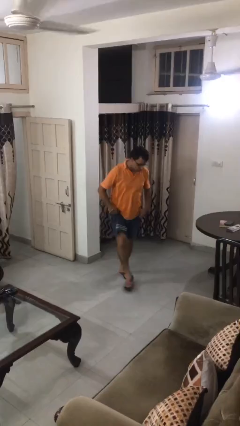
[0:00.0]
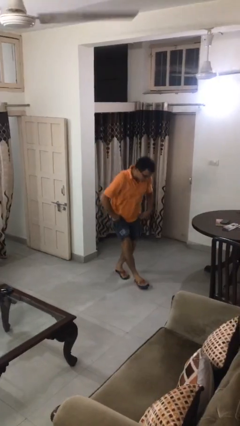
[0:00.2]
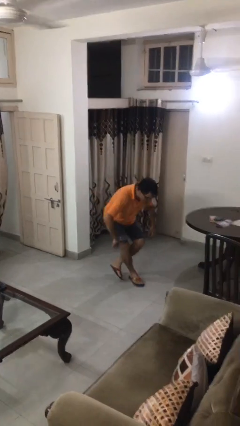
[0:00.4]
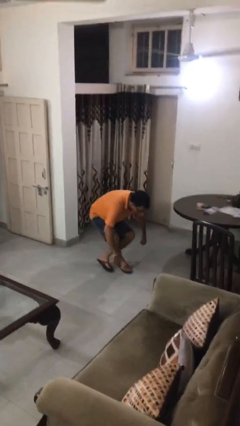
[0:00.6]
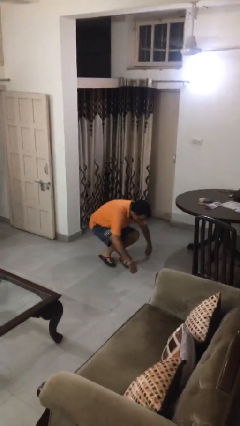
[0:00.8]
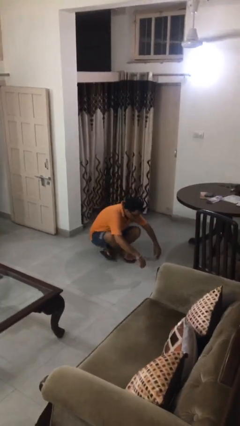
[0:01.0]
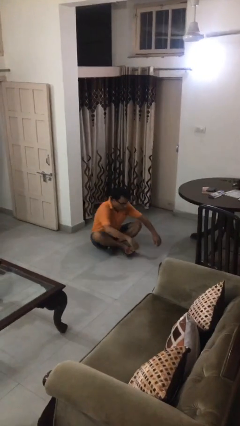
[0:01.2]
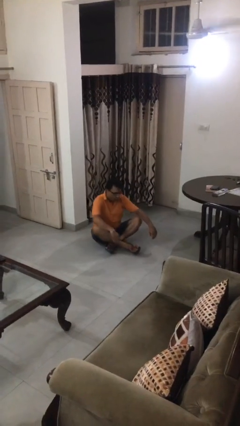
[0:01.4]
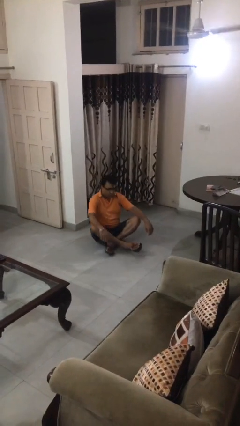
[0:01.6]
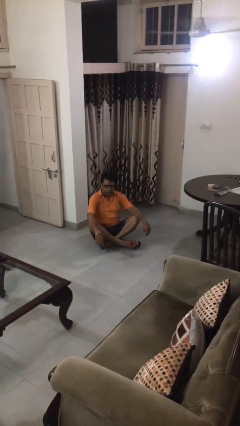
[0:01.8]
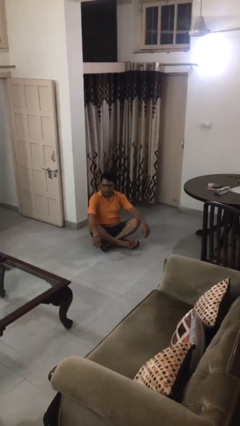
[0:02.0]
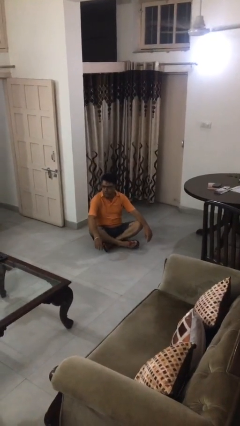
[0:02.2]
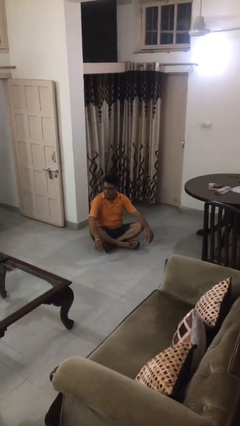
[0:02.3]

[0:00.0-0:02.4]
person sits crisscross

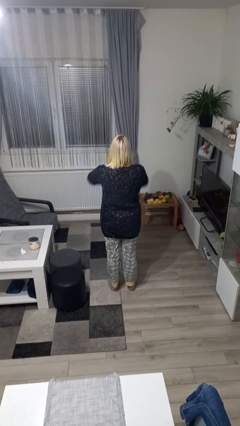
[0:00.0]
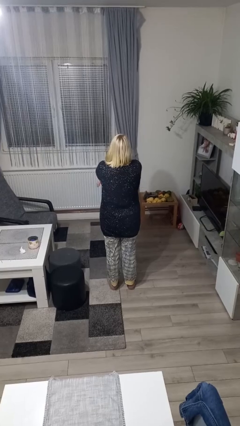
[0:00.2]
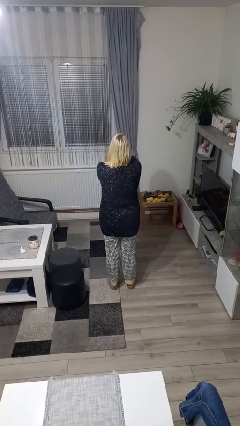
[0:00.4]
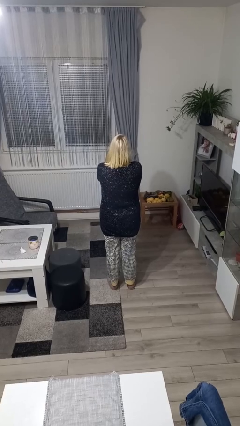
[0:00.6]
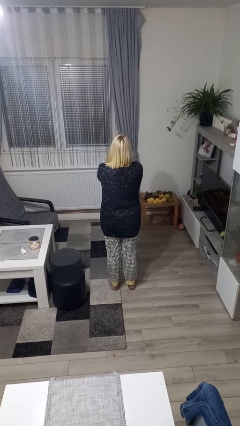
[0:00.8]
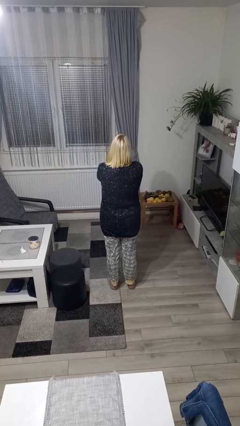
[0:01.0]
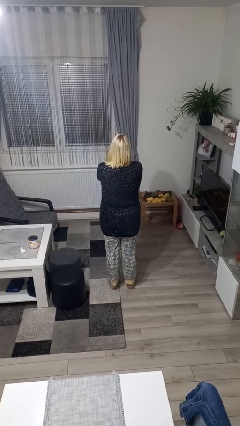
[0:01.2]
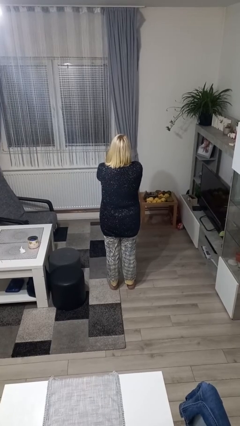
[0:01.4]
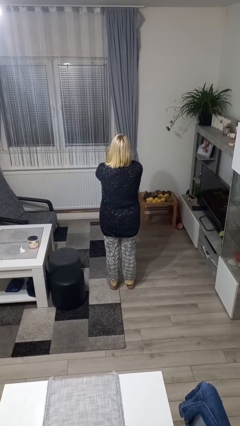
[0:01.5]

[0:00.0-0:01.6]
person gestures arms x

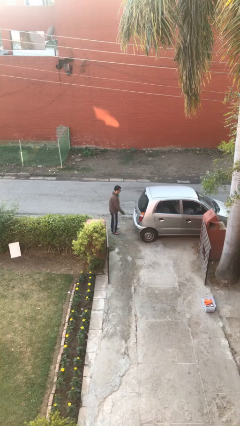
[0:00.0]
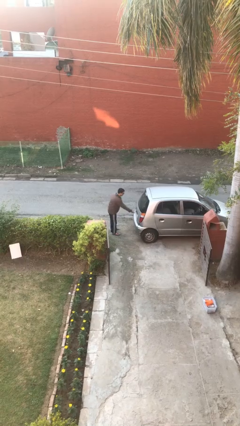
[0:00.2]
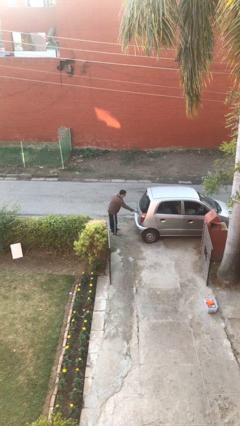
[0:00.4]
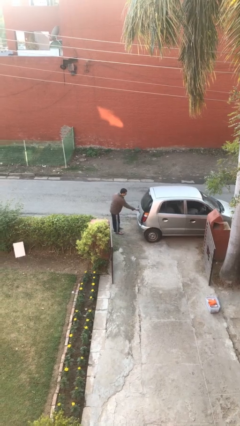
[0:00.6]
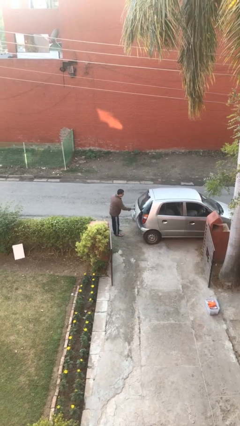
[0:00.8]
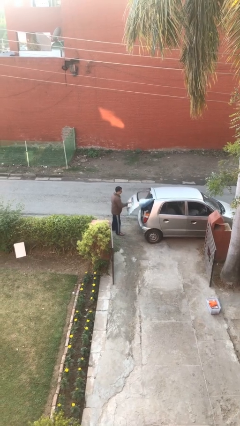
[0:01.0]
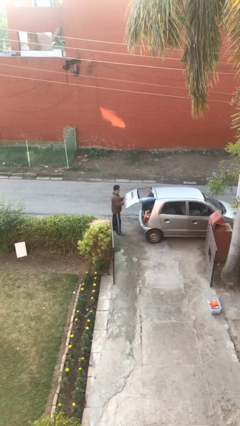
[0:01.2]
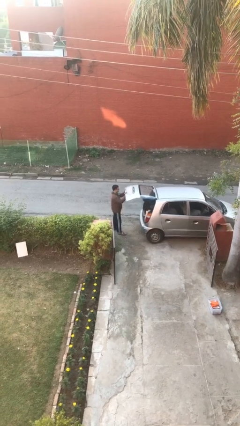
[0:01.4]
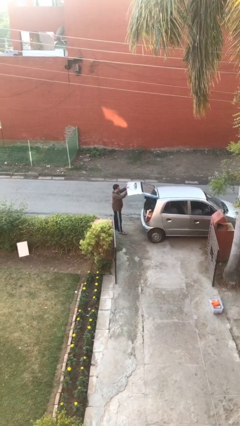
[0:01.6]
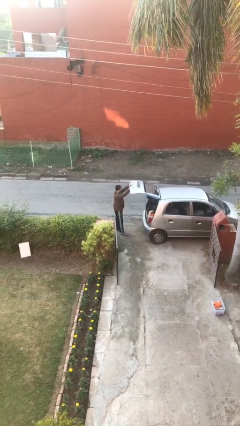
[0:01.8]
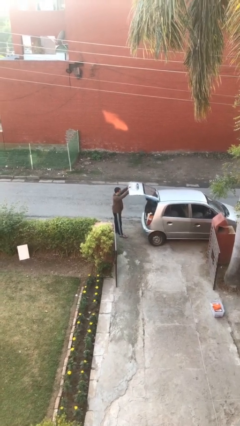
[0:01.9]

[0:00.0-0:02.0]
person opens car trunk

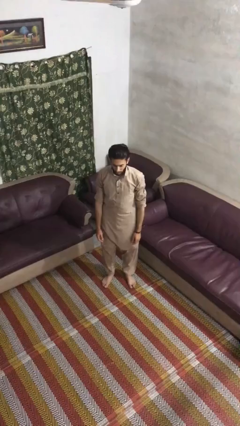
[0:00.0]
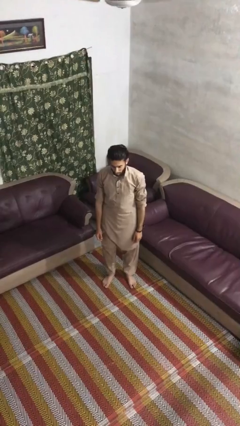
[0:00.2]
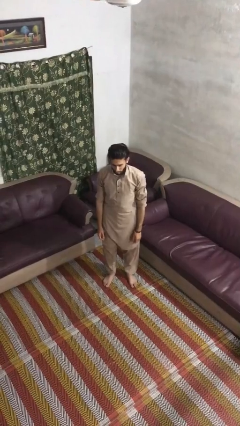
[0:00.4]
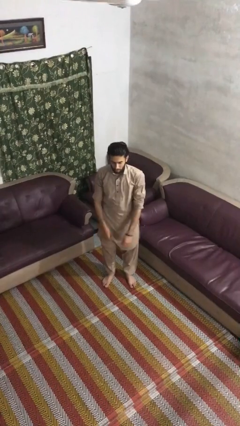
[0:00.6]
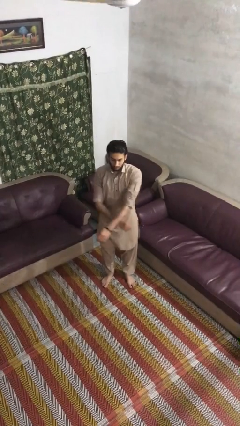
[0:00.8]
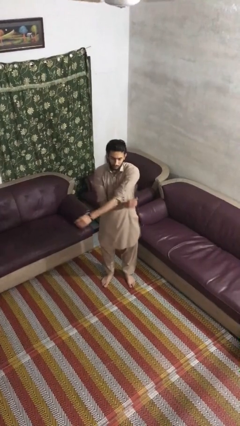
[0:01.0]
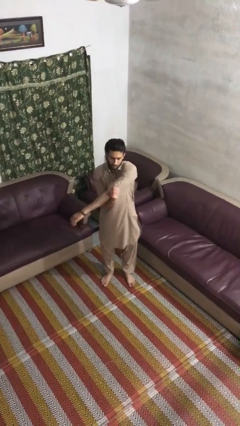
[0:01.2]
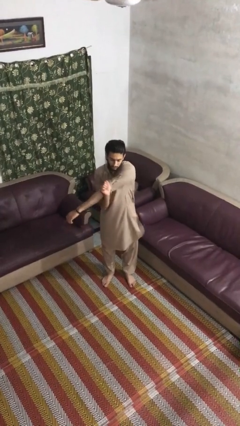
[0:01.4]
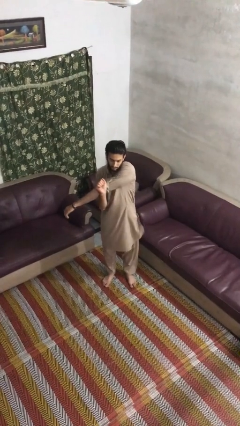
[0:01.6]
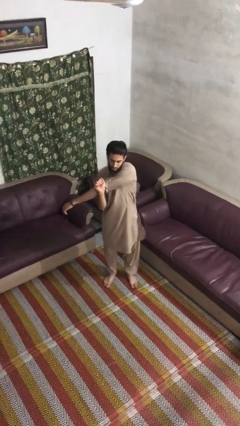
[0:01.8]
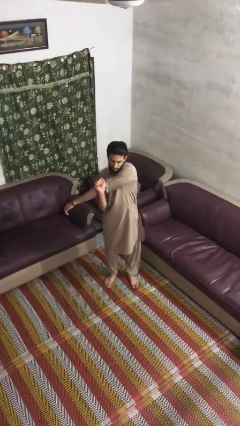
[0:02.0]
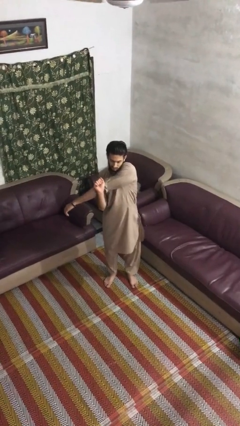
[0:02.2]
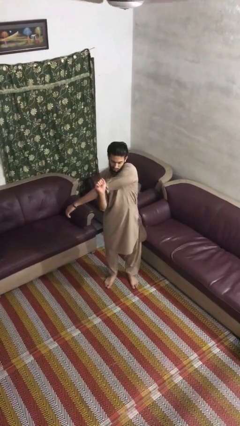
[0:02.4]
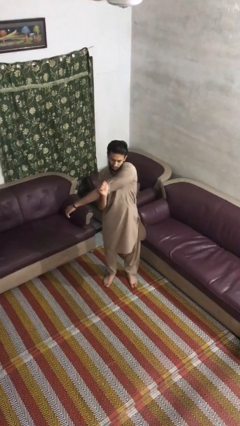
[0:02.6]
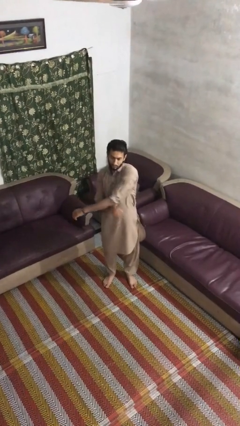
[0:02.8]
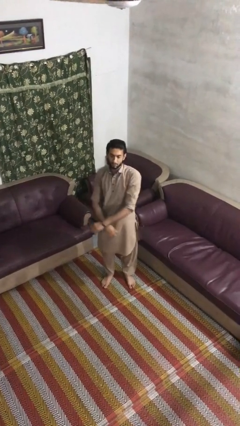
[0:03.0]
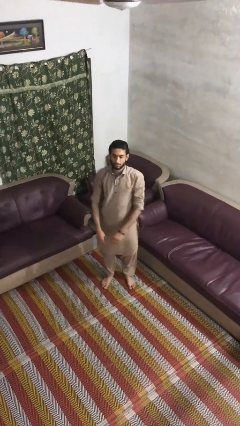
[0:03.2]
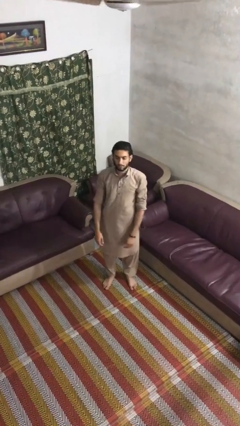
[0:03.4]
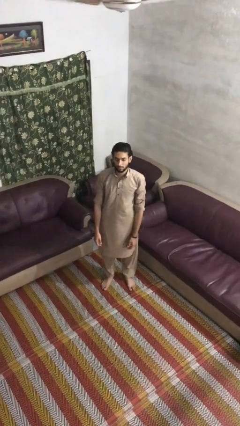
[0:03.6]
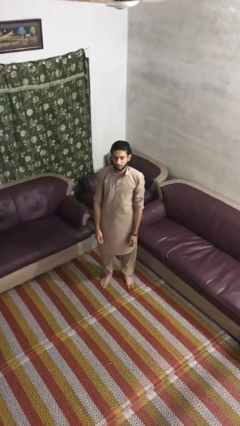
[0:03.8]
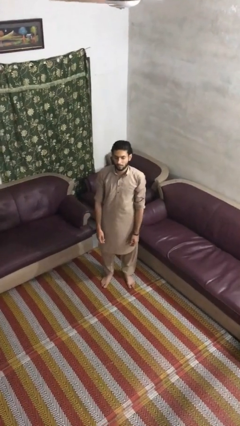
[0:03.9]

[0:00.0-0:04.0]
person stretches arms to side

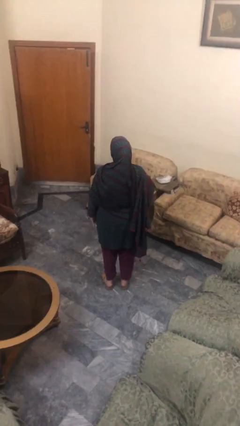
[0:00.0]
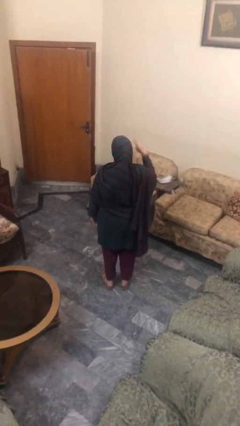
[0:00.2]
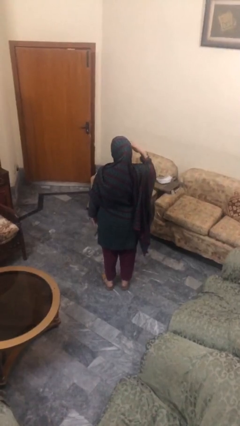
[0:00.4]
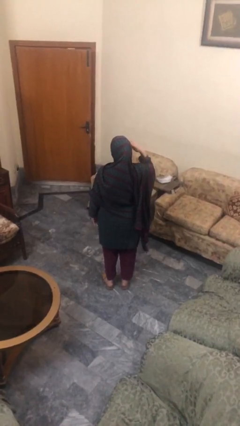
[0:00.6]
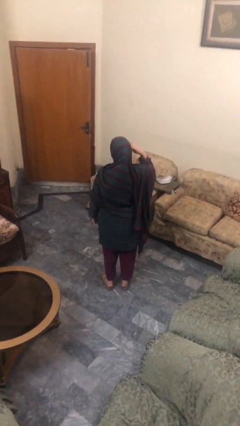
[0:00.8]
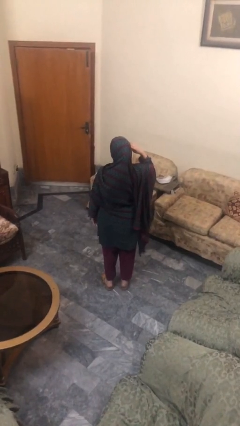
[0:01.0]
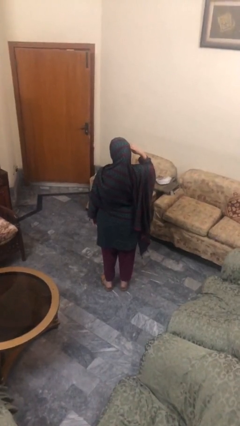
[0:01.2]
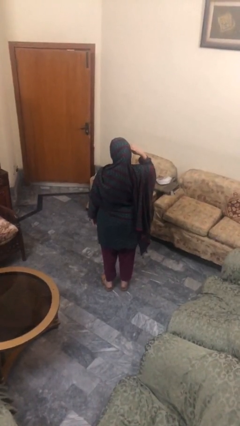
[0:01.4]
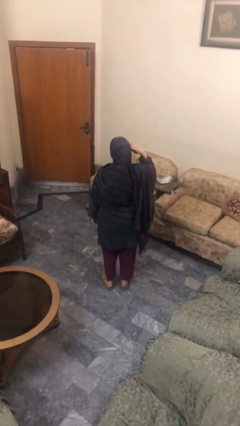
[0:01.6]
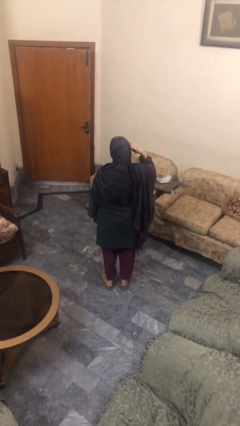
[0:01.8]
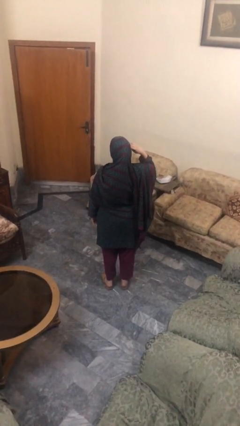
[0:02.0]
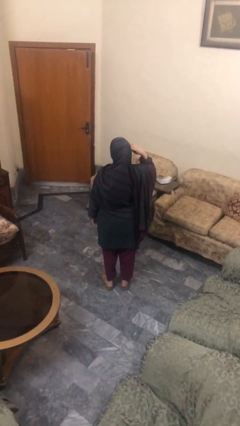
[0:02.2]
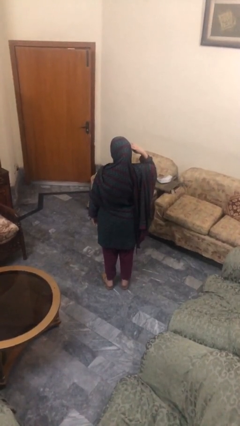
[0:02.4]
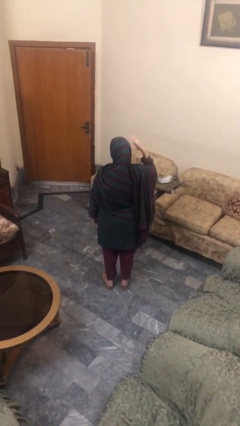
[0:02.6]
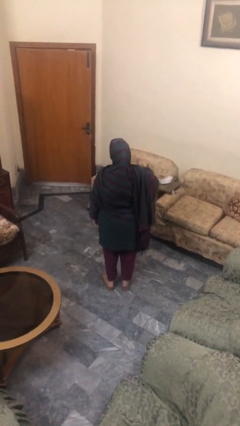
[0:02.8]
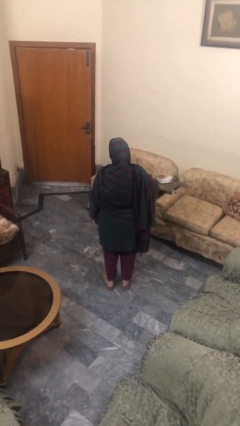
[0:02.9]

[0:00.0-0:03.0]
person salutes

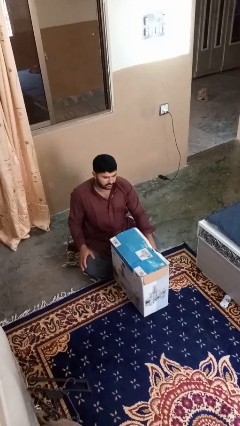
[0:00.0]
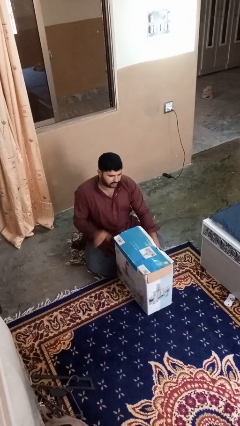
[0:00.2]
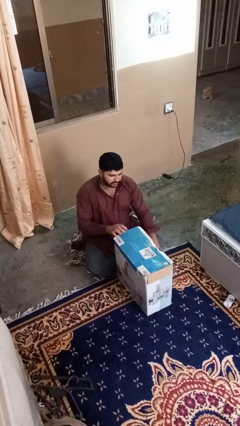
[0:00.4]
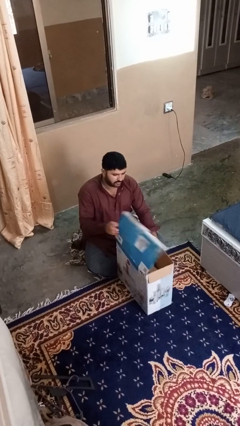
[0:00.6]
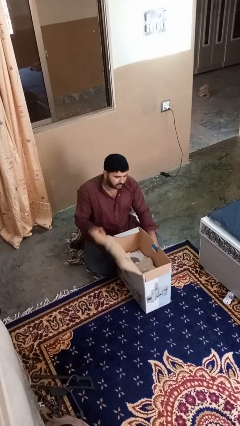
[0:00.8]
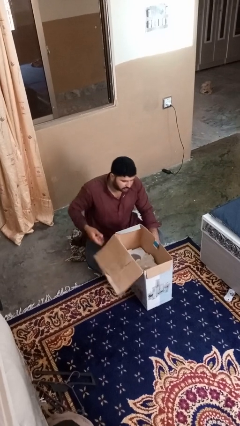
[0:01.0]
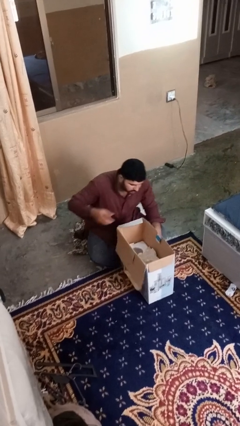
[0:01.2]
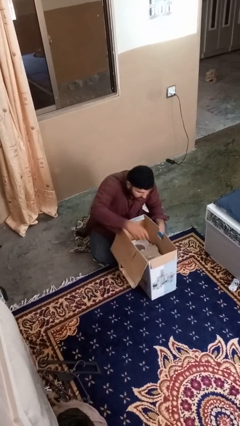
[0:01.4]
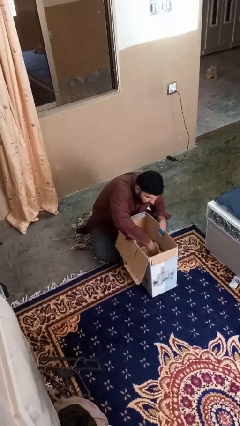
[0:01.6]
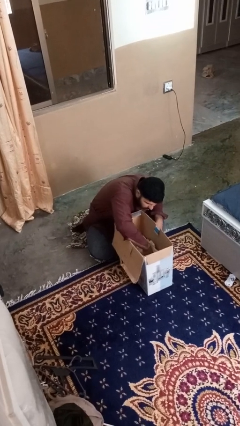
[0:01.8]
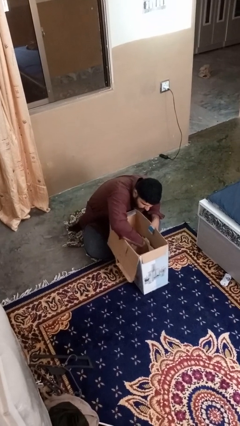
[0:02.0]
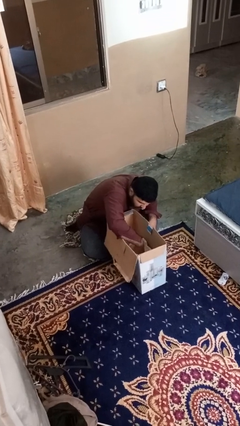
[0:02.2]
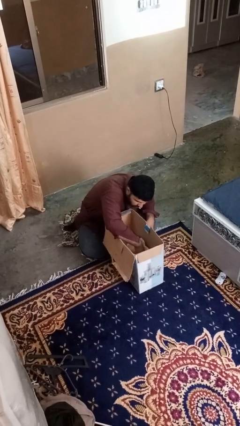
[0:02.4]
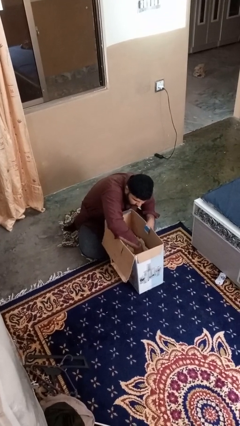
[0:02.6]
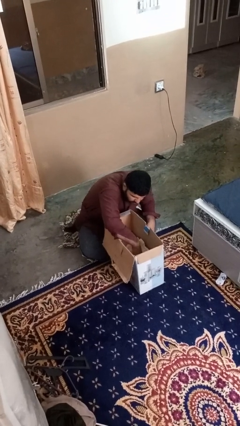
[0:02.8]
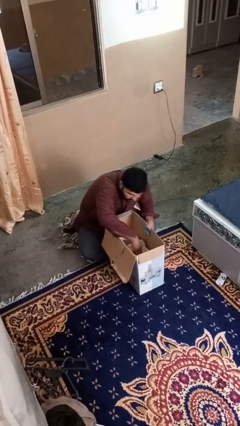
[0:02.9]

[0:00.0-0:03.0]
person searches in box

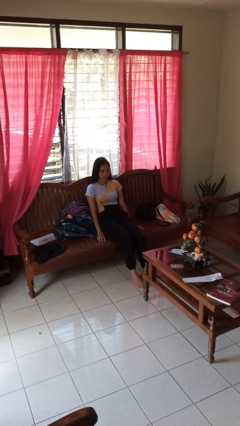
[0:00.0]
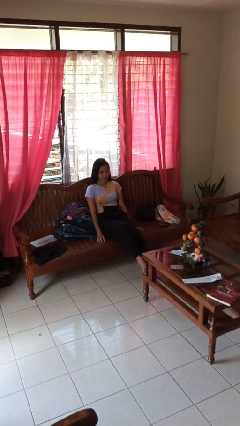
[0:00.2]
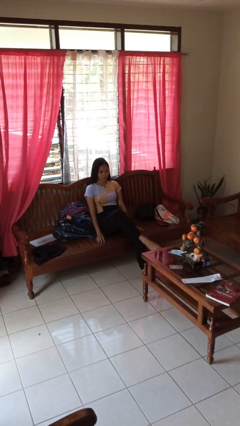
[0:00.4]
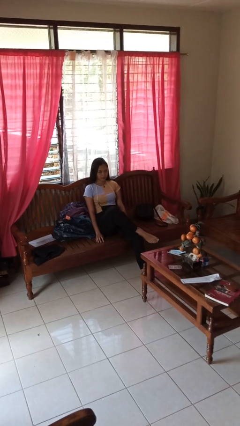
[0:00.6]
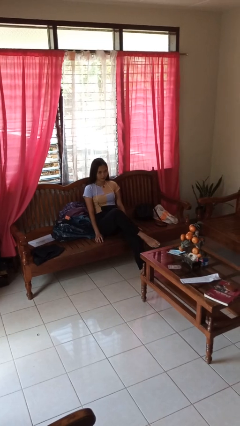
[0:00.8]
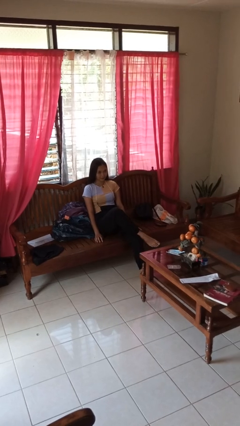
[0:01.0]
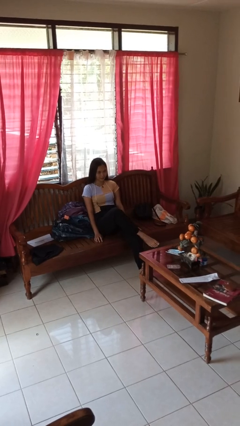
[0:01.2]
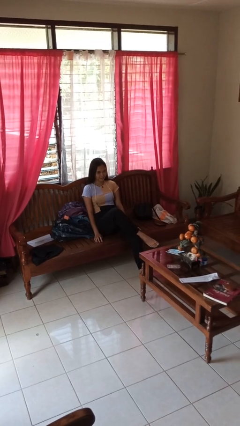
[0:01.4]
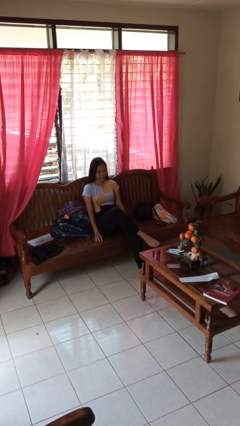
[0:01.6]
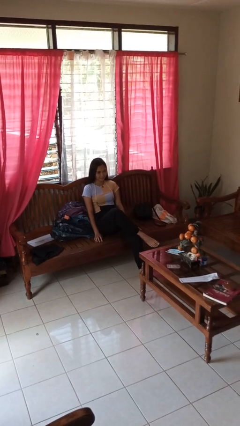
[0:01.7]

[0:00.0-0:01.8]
person crosses legs
